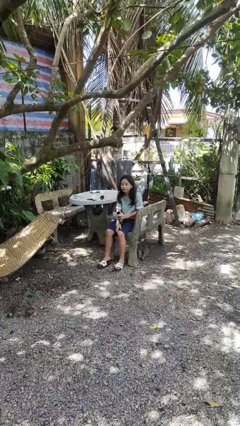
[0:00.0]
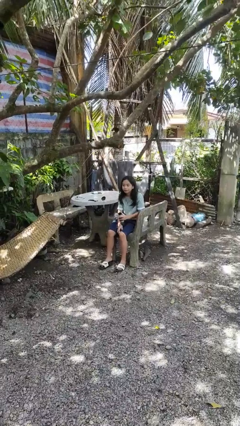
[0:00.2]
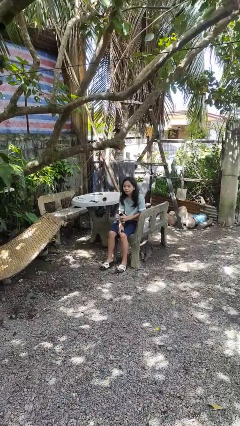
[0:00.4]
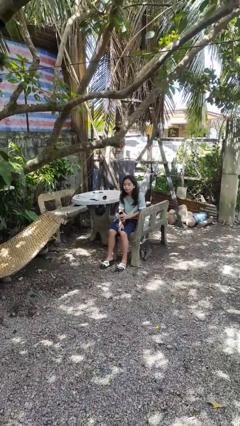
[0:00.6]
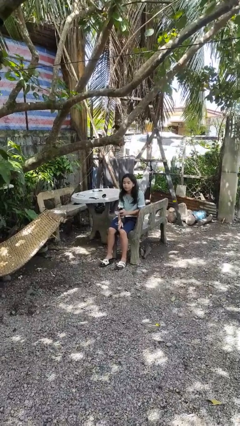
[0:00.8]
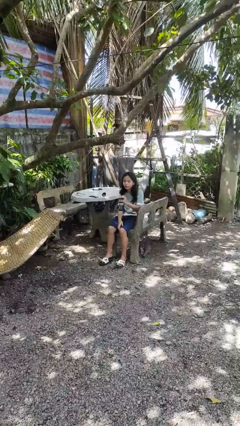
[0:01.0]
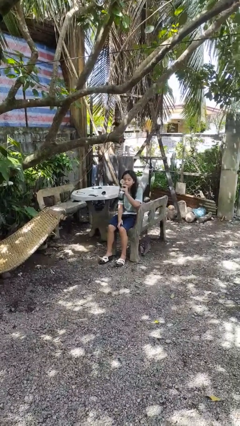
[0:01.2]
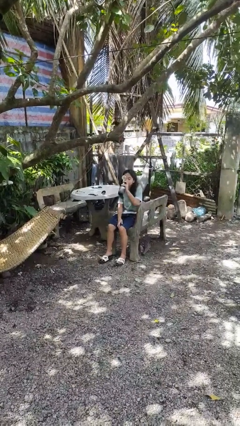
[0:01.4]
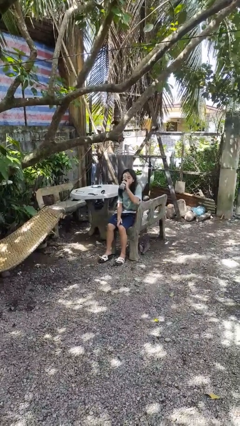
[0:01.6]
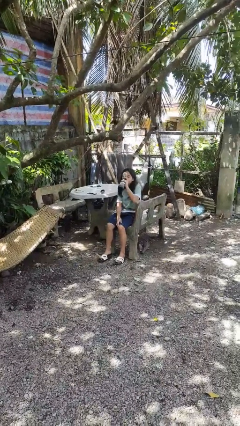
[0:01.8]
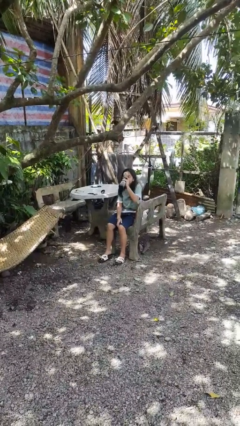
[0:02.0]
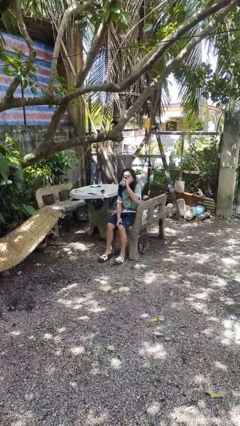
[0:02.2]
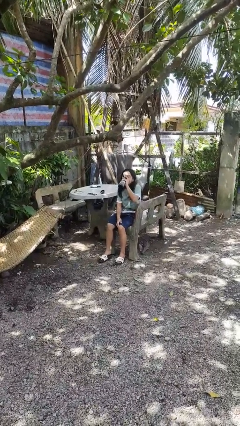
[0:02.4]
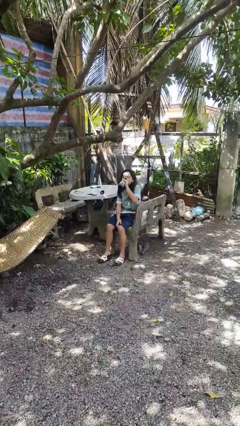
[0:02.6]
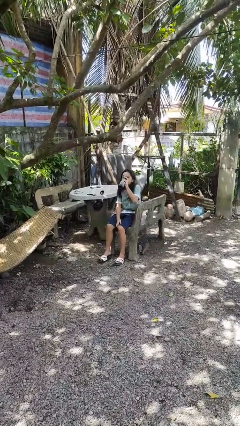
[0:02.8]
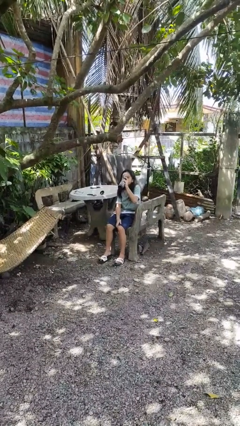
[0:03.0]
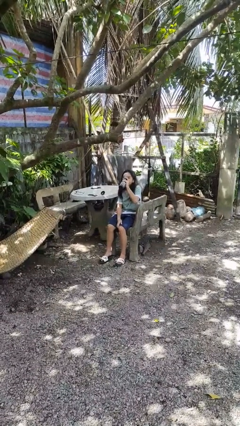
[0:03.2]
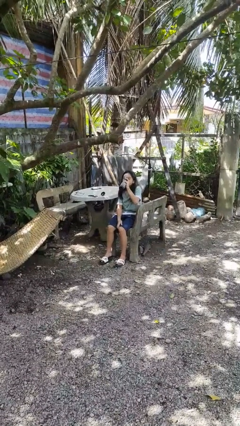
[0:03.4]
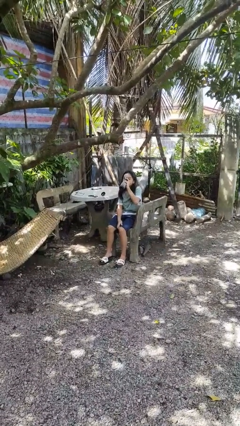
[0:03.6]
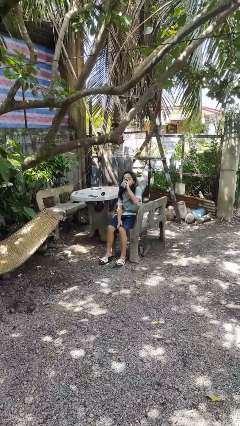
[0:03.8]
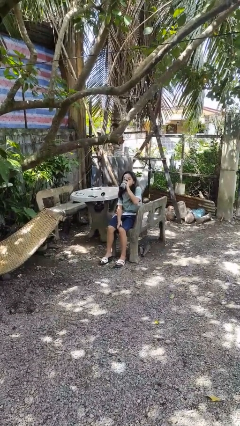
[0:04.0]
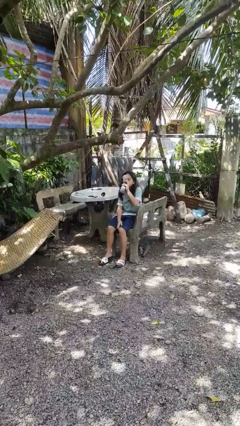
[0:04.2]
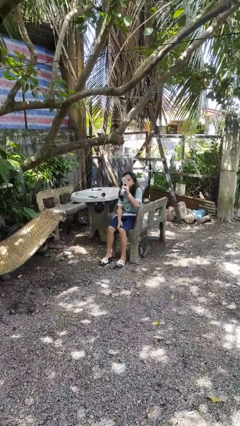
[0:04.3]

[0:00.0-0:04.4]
person drinks from bottle

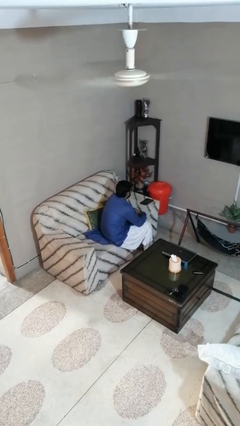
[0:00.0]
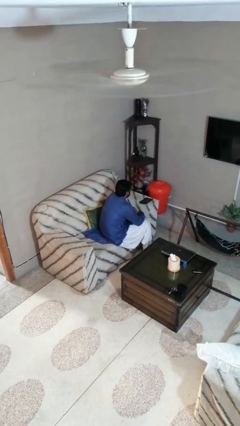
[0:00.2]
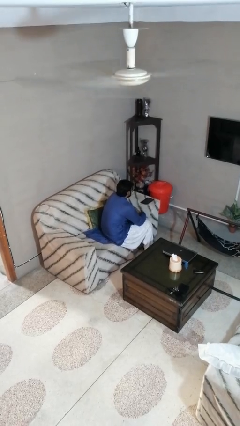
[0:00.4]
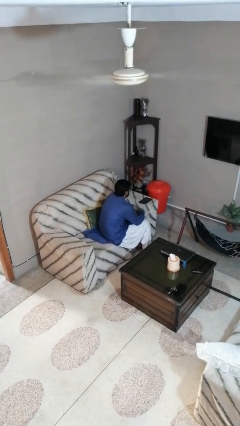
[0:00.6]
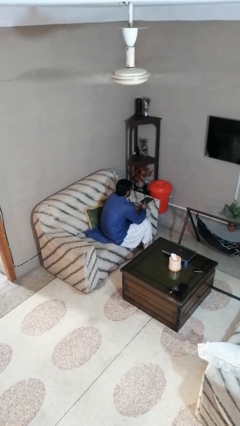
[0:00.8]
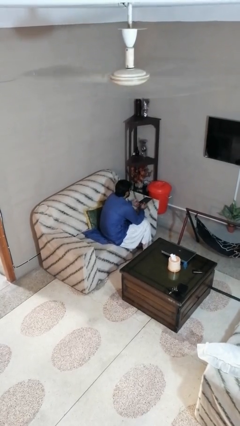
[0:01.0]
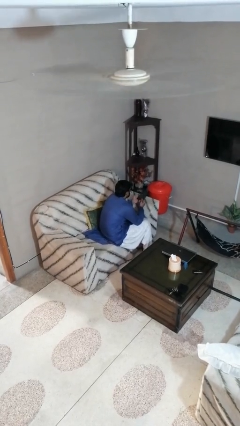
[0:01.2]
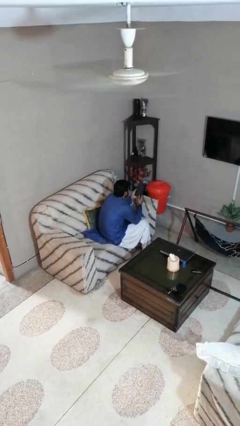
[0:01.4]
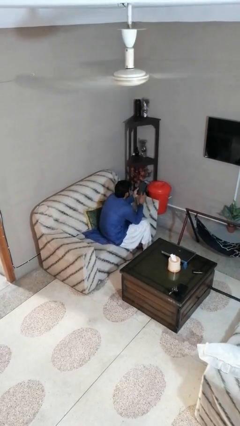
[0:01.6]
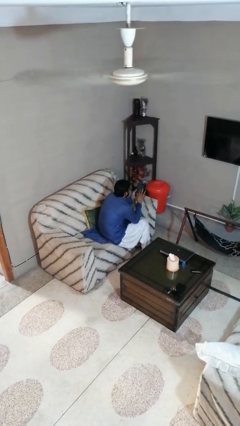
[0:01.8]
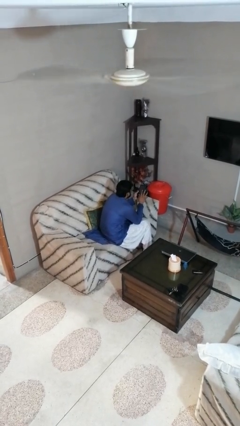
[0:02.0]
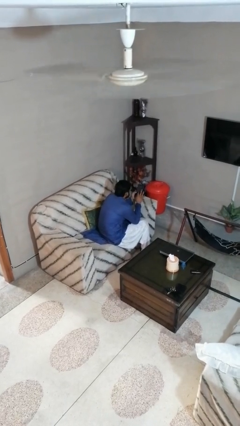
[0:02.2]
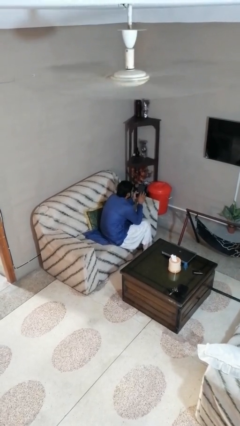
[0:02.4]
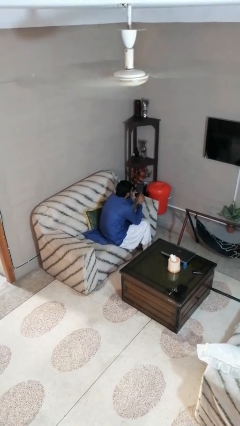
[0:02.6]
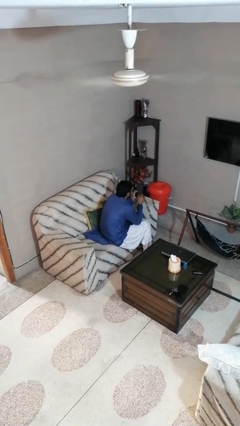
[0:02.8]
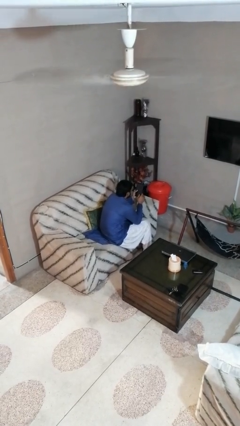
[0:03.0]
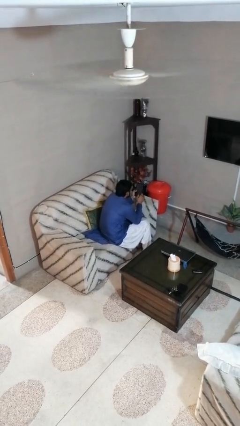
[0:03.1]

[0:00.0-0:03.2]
person interacts with tablet

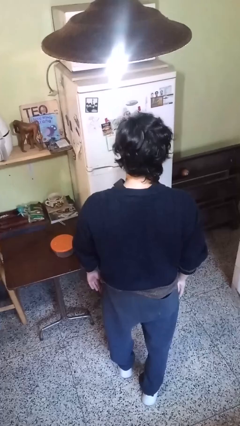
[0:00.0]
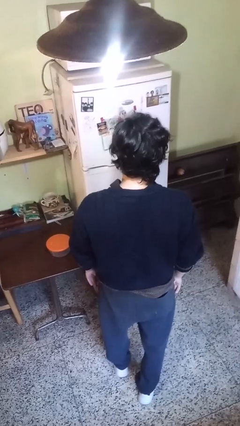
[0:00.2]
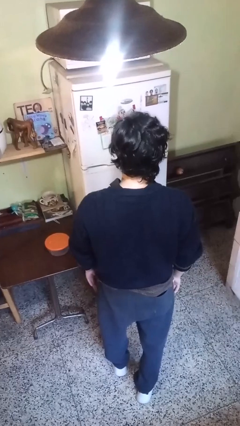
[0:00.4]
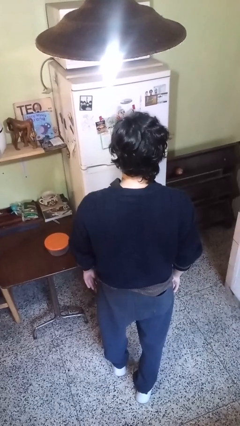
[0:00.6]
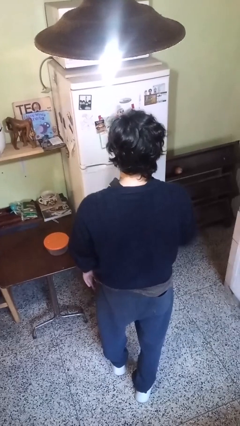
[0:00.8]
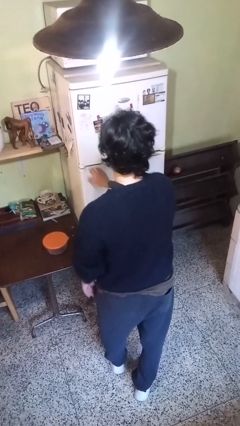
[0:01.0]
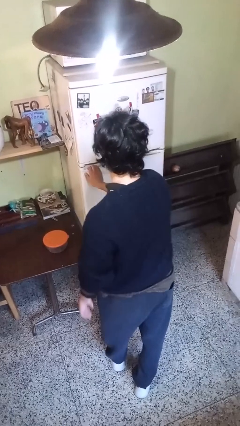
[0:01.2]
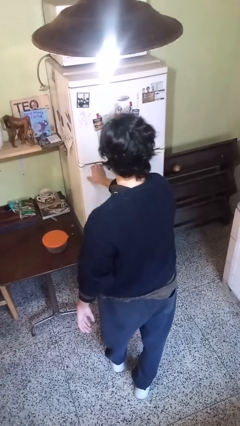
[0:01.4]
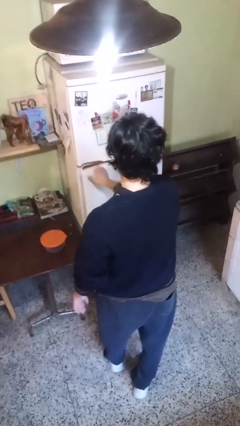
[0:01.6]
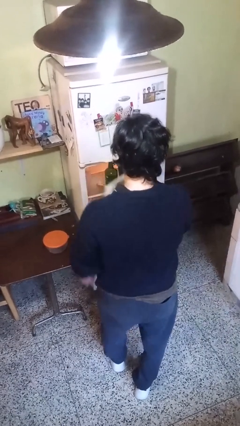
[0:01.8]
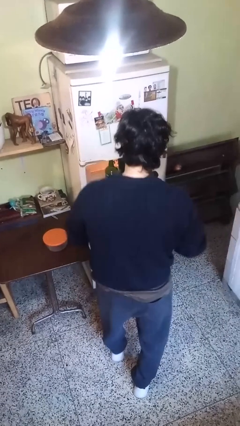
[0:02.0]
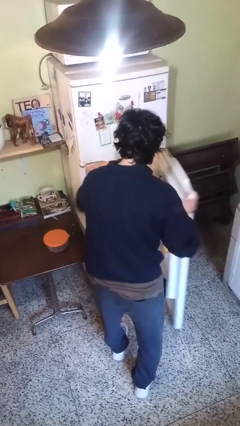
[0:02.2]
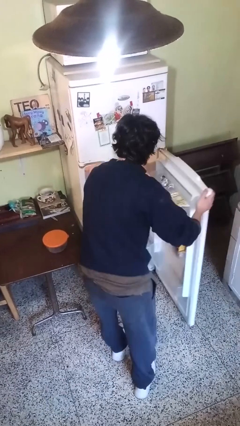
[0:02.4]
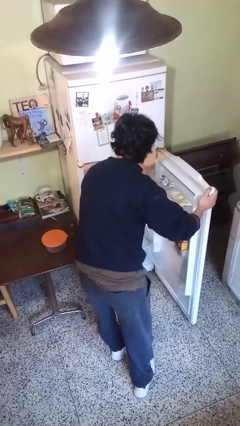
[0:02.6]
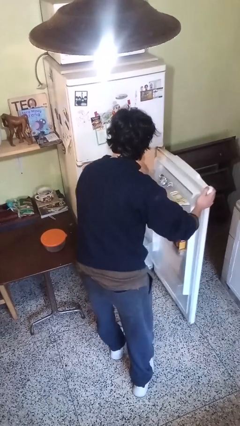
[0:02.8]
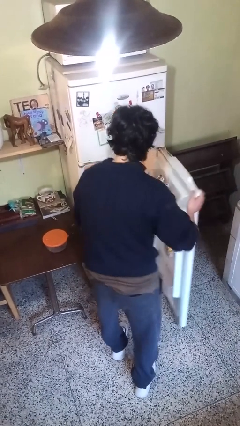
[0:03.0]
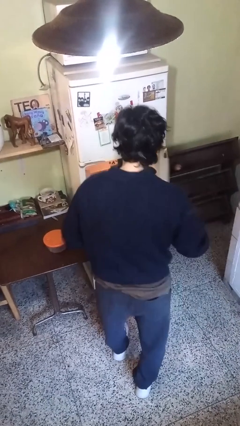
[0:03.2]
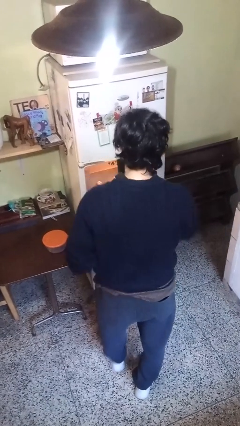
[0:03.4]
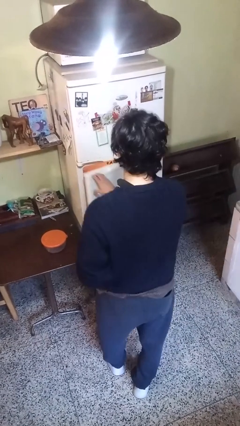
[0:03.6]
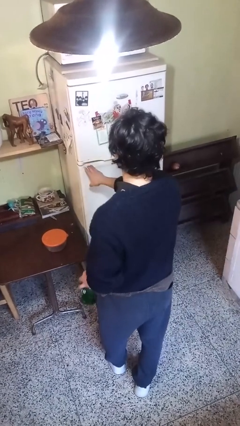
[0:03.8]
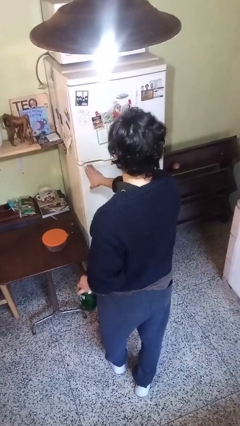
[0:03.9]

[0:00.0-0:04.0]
person takes object from refrigerator

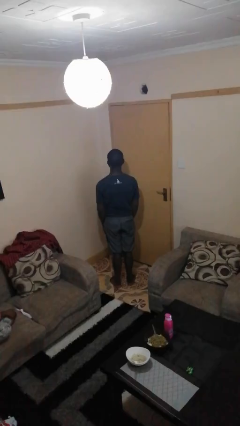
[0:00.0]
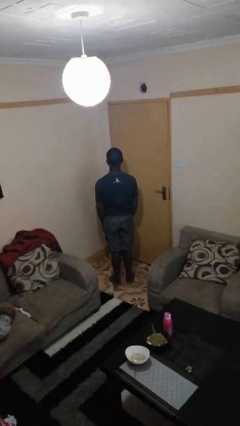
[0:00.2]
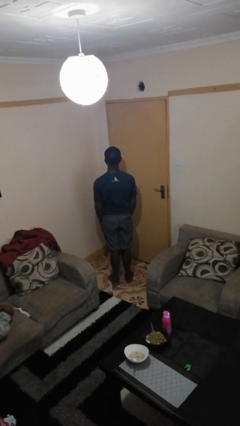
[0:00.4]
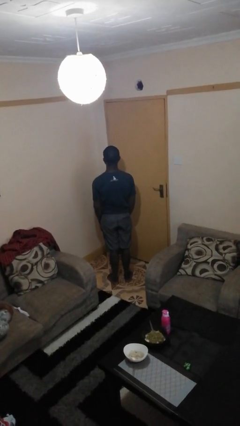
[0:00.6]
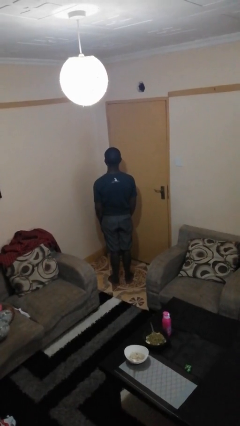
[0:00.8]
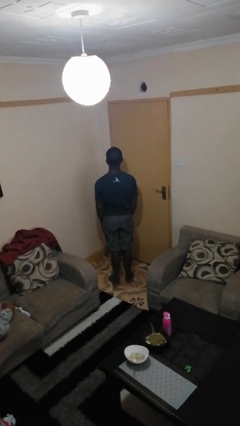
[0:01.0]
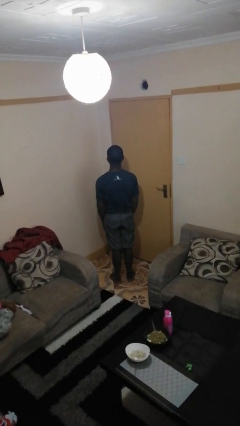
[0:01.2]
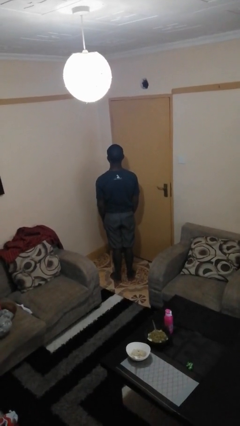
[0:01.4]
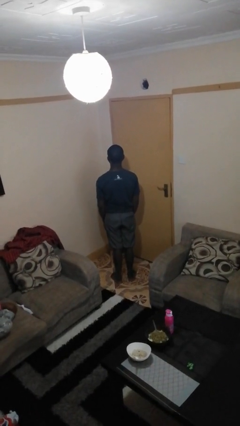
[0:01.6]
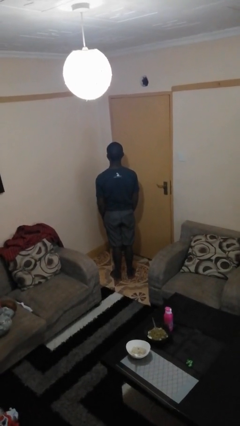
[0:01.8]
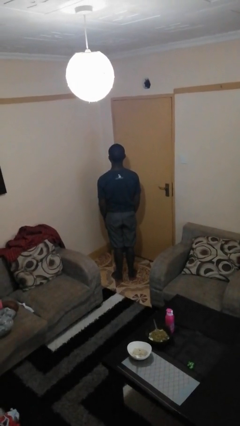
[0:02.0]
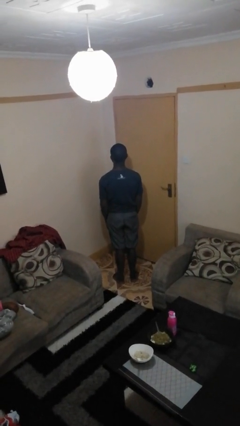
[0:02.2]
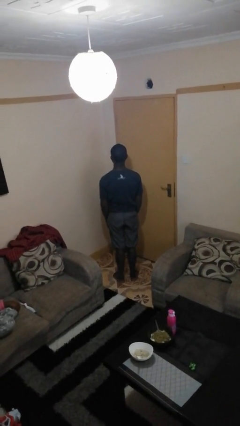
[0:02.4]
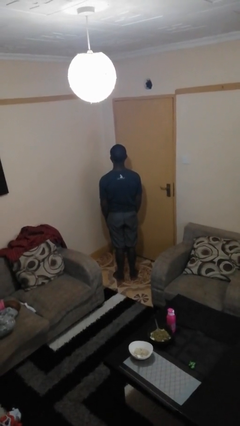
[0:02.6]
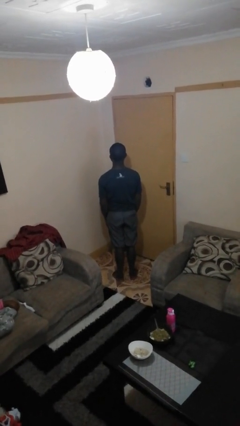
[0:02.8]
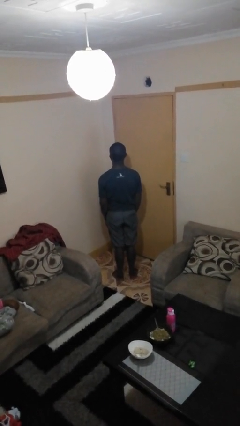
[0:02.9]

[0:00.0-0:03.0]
person gestures heart

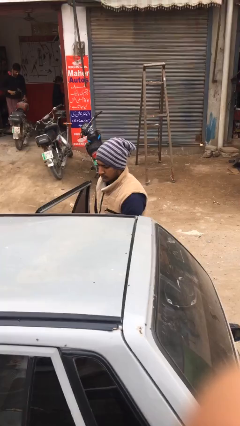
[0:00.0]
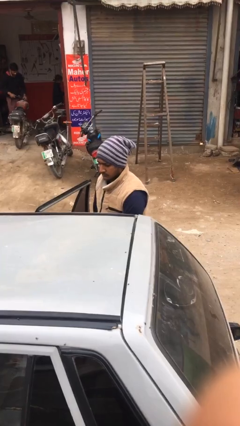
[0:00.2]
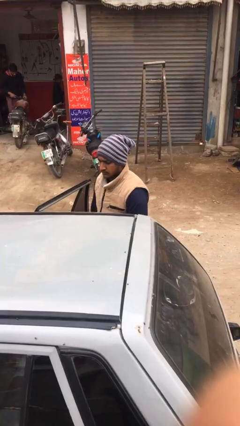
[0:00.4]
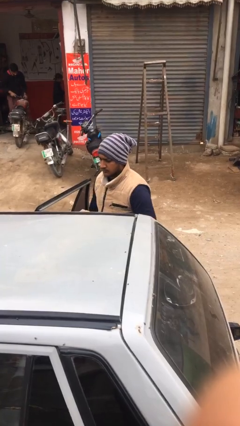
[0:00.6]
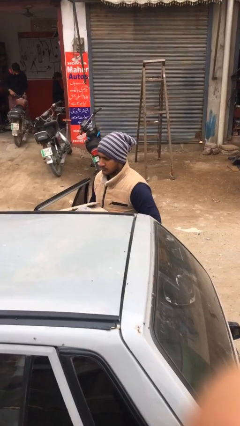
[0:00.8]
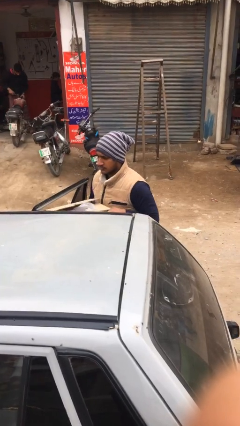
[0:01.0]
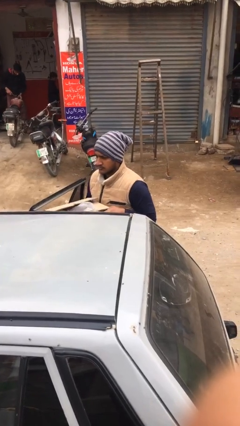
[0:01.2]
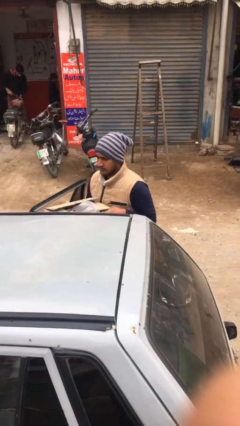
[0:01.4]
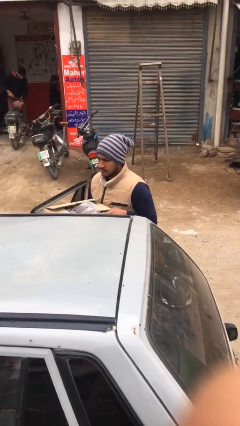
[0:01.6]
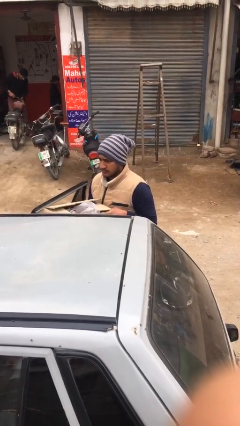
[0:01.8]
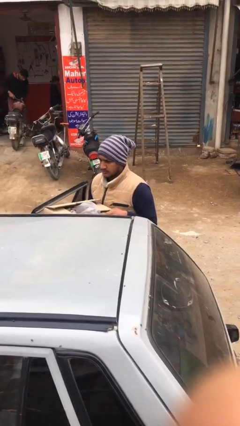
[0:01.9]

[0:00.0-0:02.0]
person unloads car

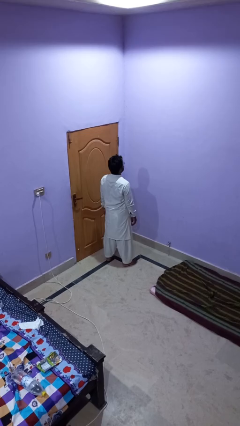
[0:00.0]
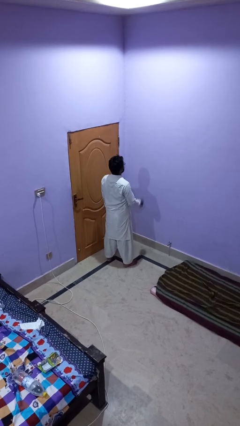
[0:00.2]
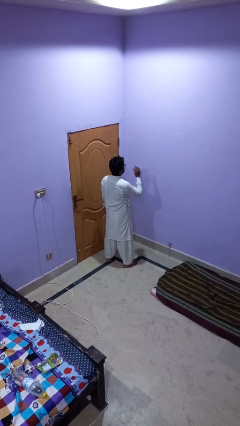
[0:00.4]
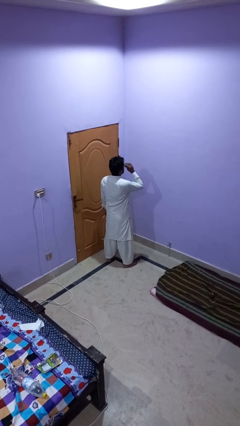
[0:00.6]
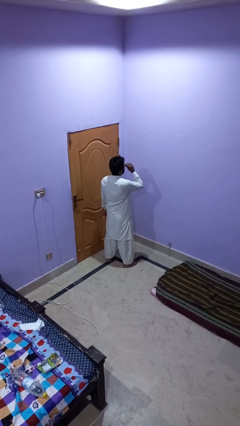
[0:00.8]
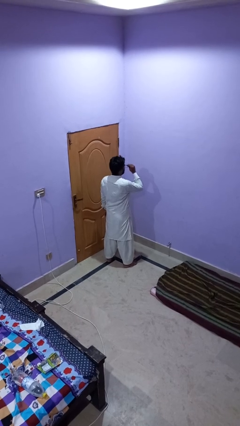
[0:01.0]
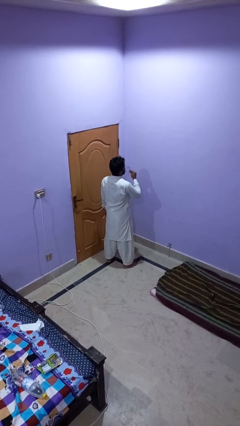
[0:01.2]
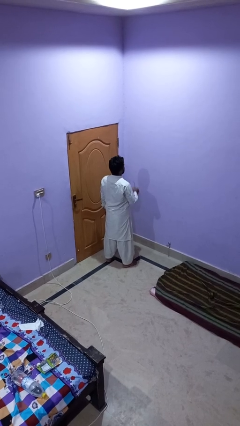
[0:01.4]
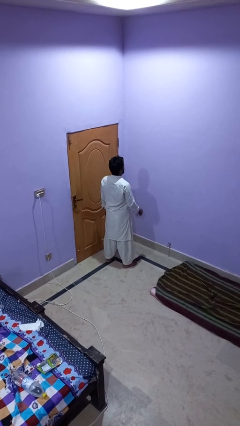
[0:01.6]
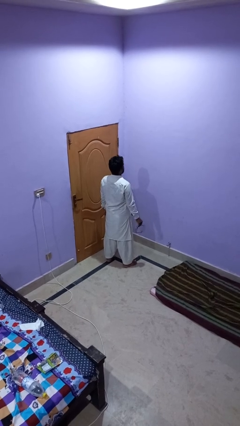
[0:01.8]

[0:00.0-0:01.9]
person takes off glasses
